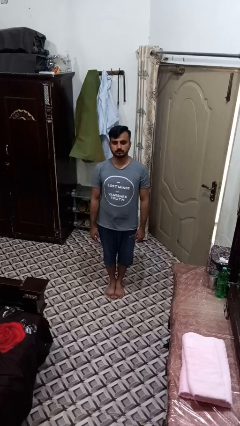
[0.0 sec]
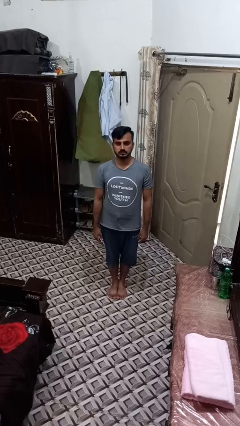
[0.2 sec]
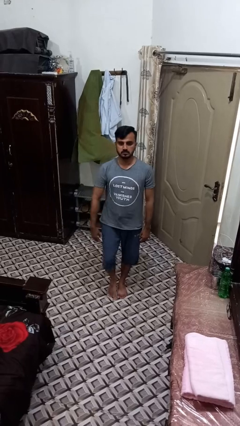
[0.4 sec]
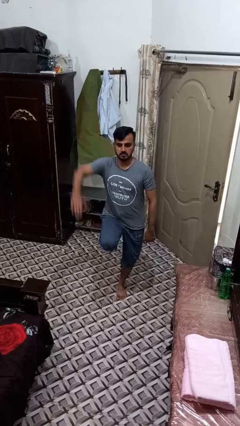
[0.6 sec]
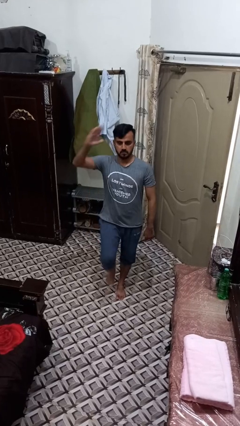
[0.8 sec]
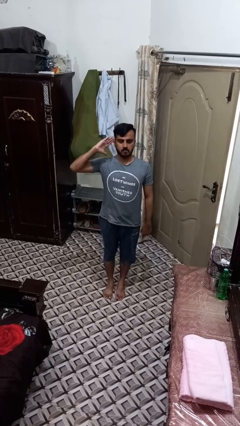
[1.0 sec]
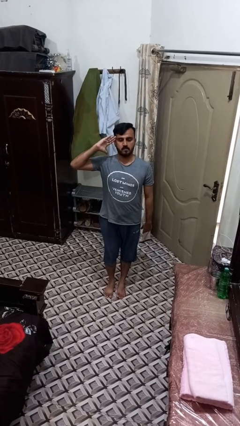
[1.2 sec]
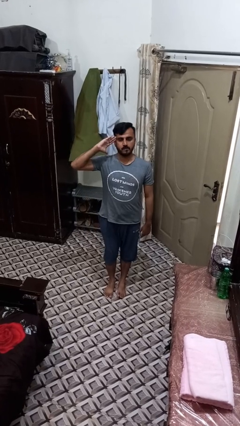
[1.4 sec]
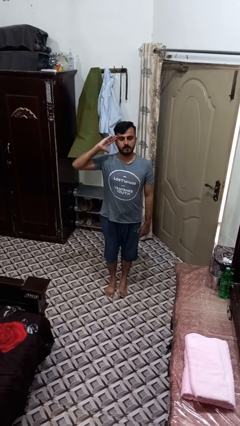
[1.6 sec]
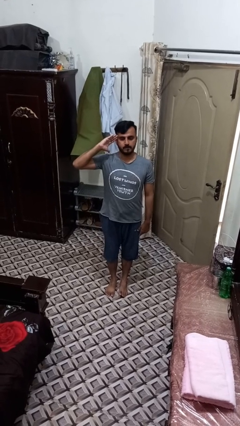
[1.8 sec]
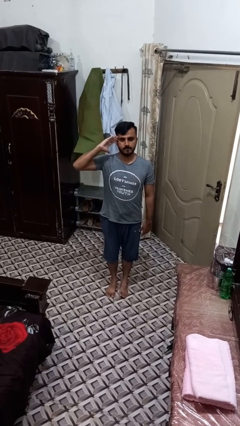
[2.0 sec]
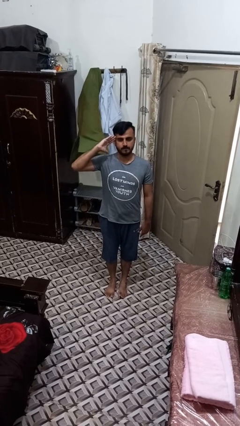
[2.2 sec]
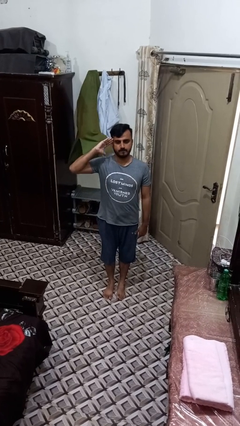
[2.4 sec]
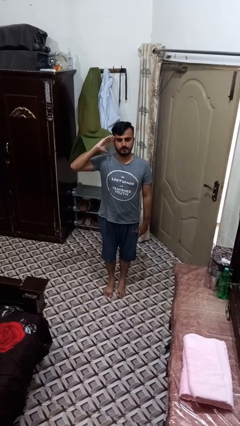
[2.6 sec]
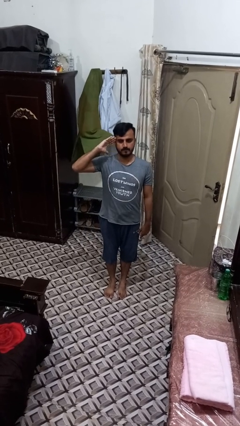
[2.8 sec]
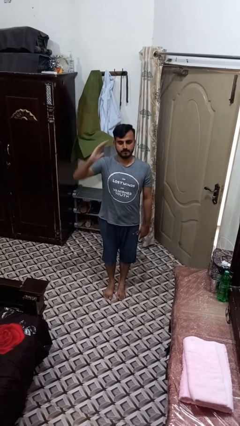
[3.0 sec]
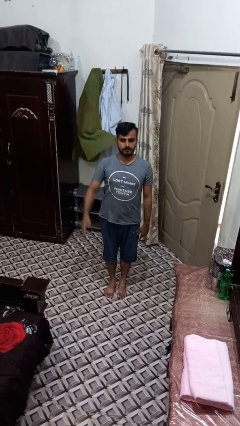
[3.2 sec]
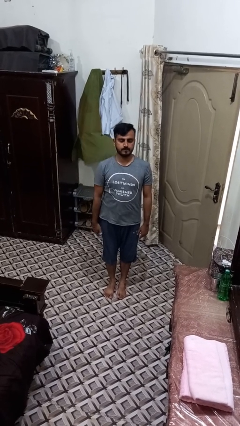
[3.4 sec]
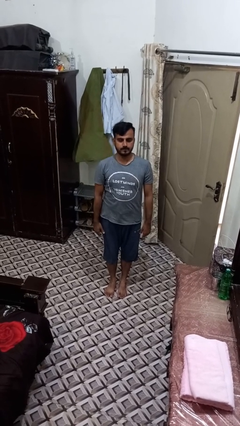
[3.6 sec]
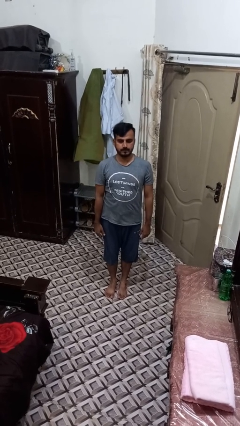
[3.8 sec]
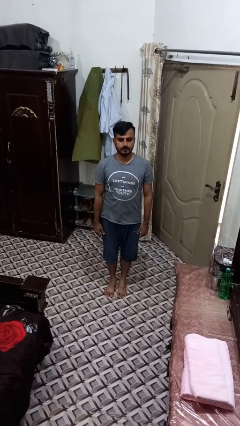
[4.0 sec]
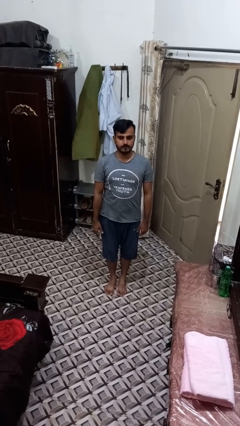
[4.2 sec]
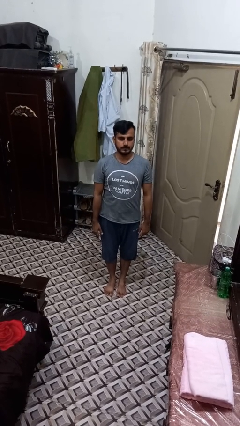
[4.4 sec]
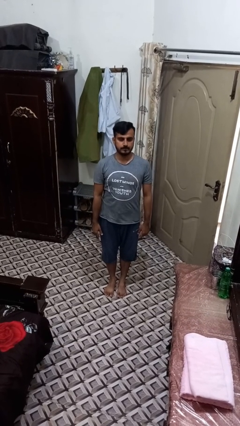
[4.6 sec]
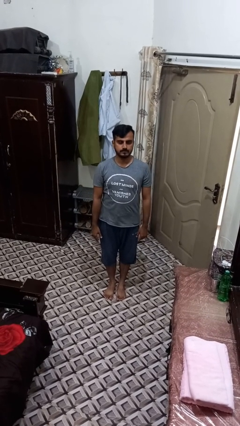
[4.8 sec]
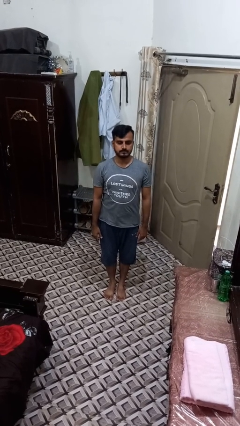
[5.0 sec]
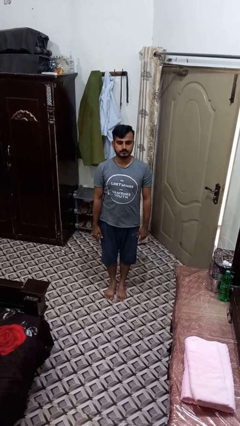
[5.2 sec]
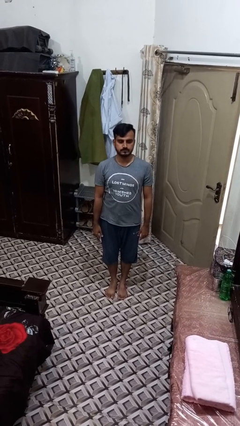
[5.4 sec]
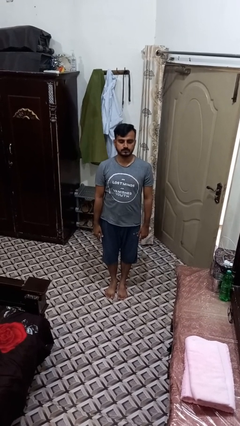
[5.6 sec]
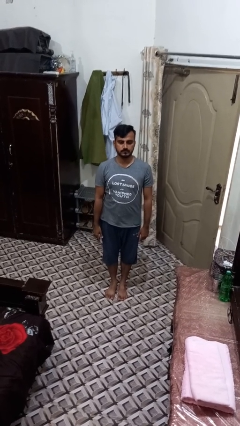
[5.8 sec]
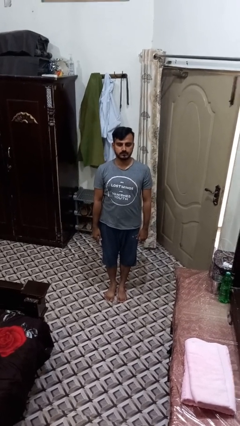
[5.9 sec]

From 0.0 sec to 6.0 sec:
person salutes

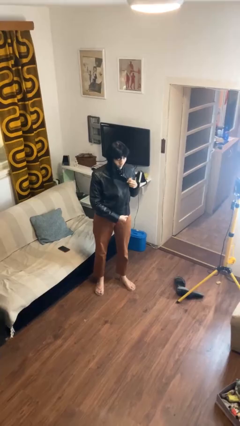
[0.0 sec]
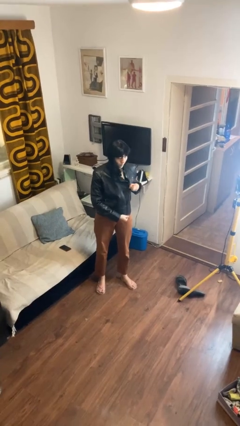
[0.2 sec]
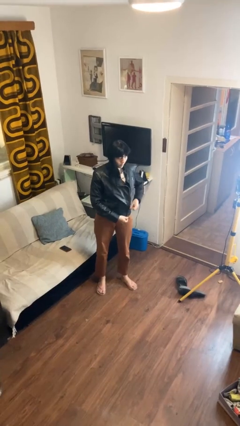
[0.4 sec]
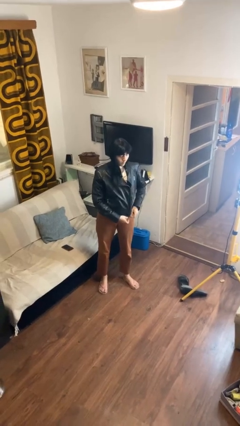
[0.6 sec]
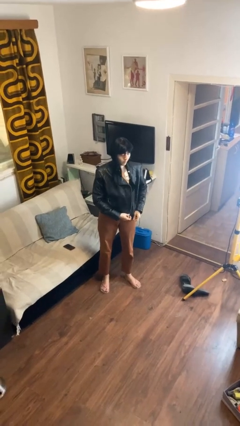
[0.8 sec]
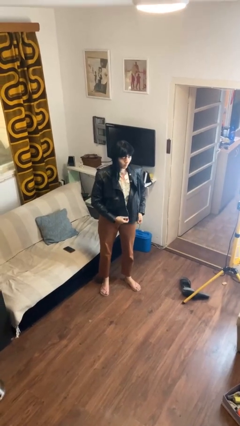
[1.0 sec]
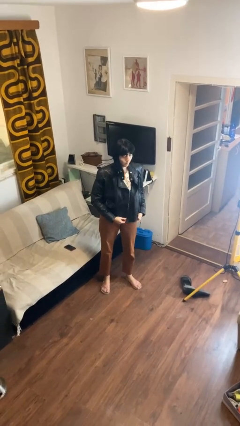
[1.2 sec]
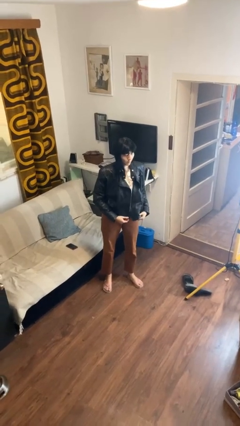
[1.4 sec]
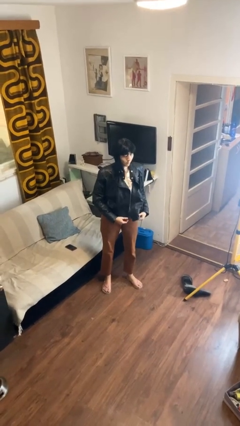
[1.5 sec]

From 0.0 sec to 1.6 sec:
person unzips jacket

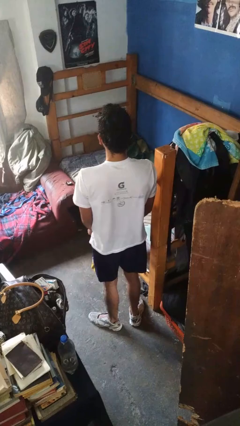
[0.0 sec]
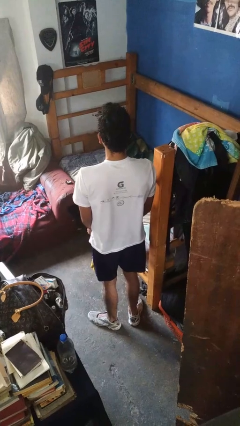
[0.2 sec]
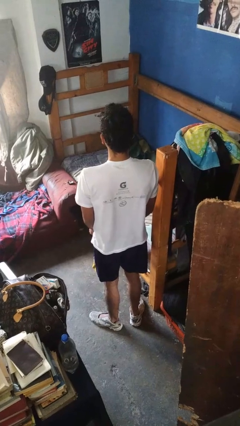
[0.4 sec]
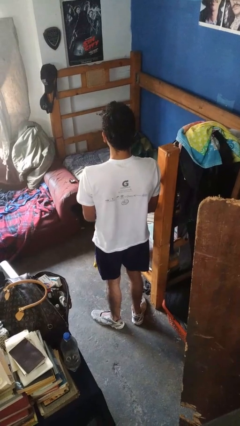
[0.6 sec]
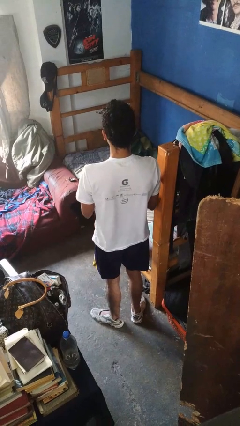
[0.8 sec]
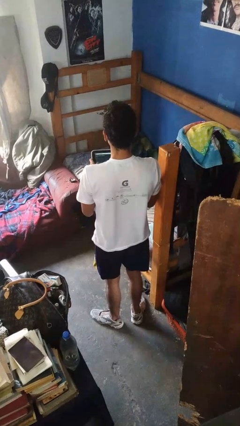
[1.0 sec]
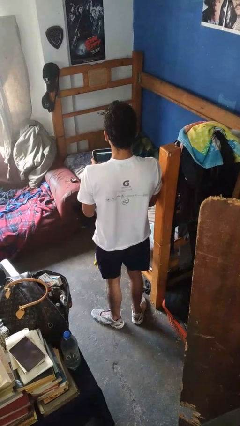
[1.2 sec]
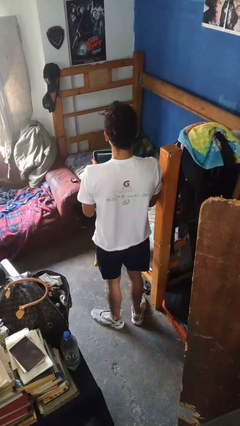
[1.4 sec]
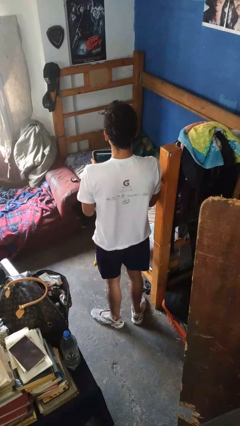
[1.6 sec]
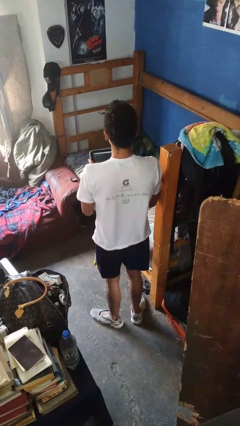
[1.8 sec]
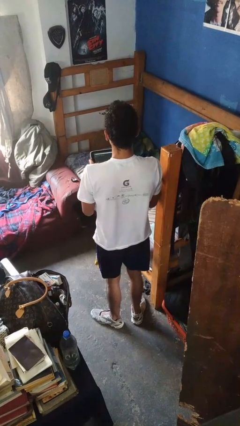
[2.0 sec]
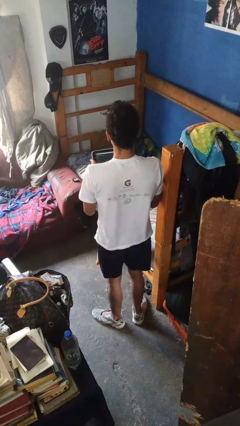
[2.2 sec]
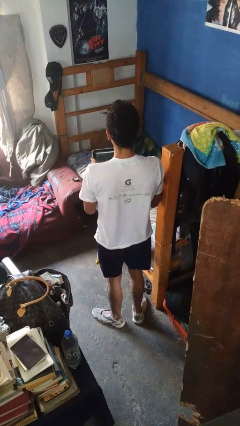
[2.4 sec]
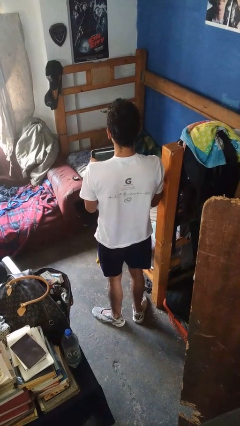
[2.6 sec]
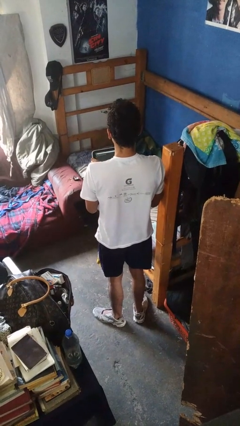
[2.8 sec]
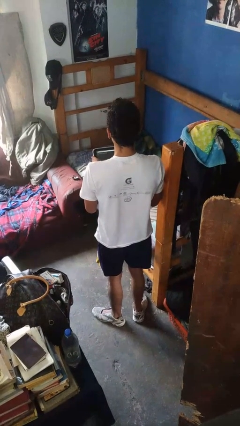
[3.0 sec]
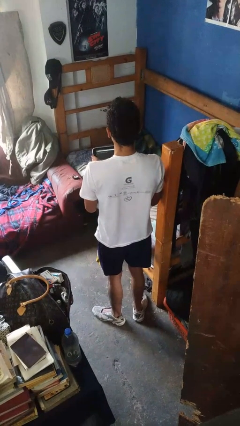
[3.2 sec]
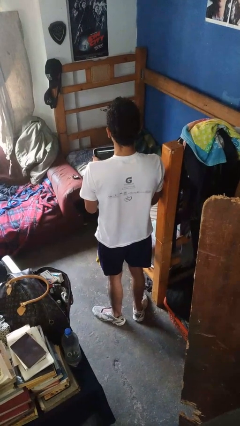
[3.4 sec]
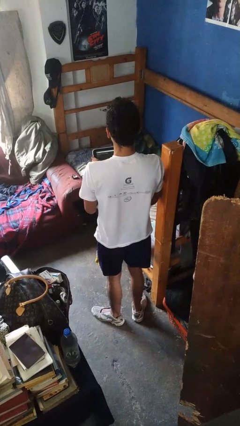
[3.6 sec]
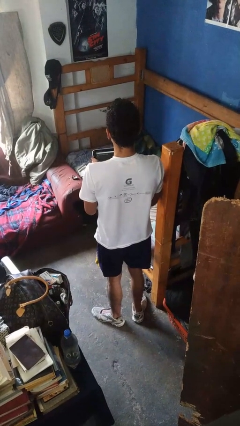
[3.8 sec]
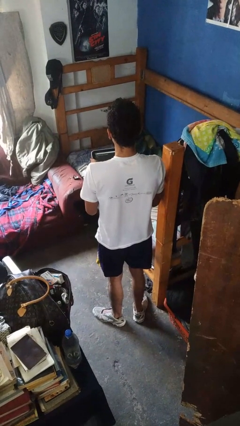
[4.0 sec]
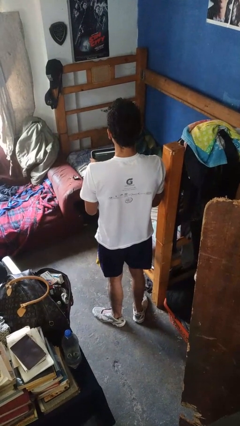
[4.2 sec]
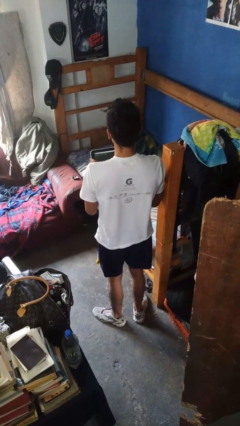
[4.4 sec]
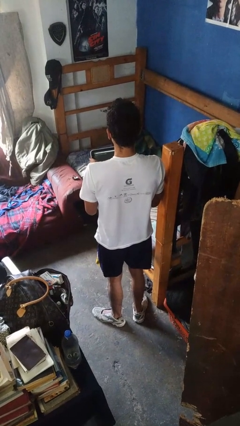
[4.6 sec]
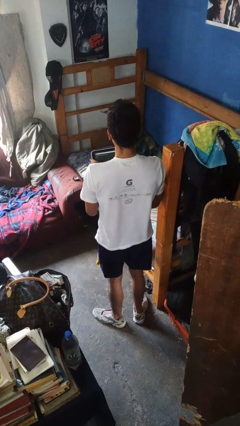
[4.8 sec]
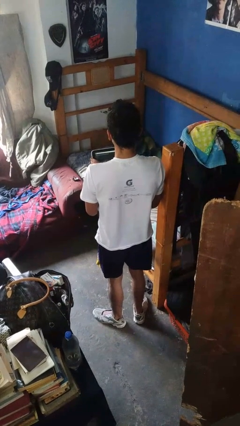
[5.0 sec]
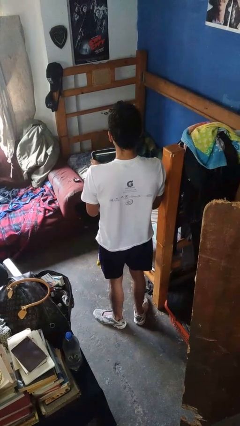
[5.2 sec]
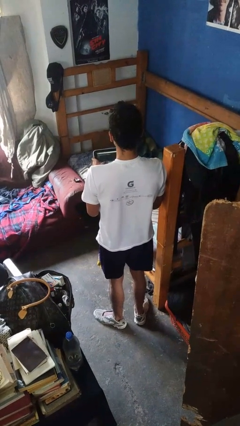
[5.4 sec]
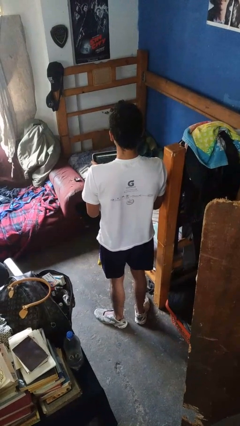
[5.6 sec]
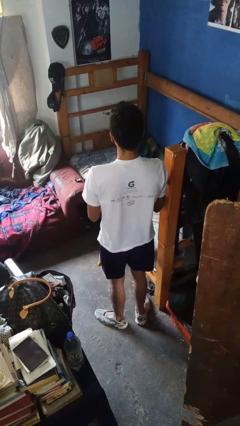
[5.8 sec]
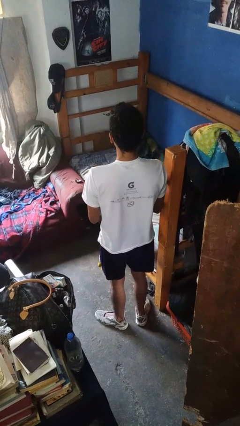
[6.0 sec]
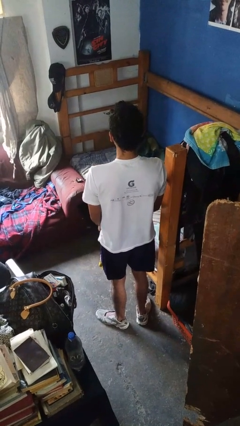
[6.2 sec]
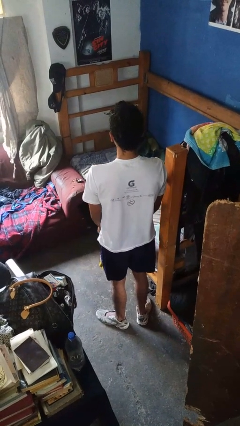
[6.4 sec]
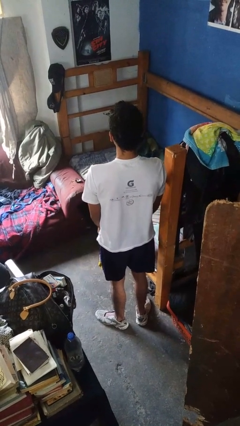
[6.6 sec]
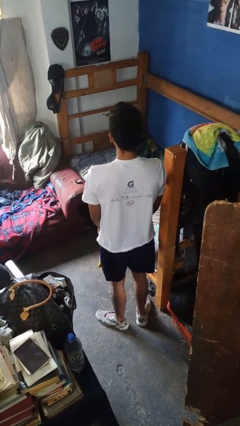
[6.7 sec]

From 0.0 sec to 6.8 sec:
person interacts with tablet

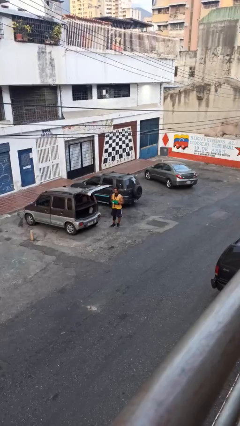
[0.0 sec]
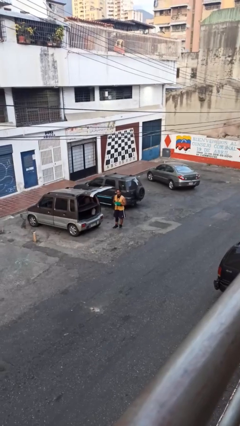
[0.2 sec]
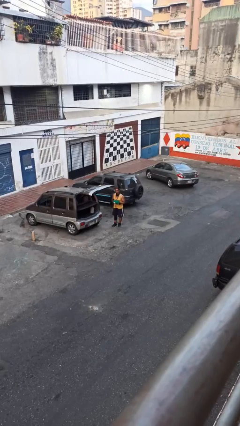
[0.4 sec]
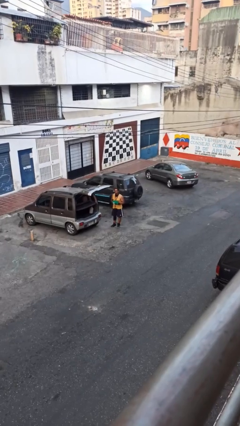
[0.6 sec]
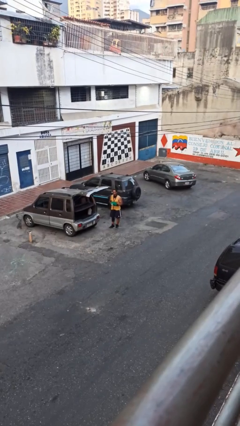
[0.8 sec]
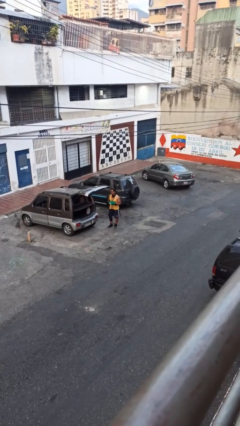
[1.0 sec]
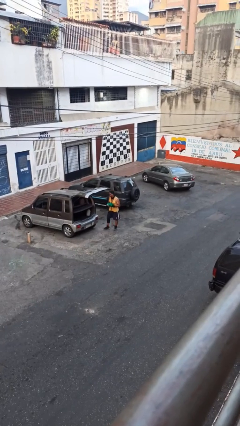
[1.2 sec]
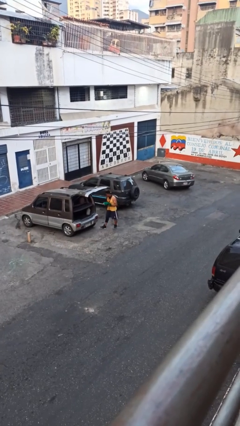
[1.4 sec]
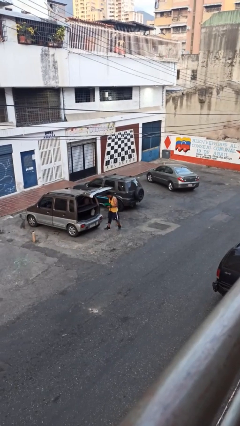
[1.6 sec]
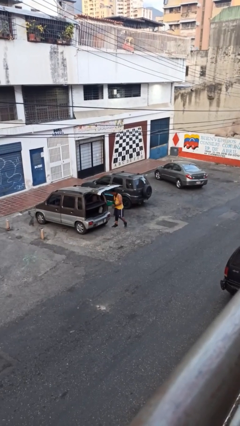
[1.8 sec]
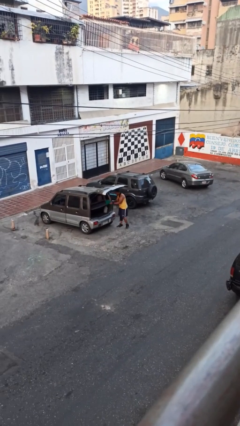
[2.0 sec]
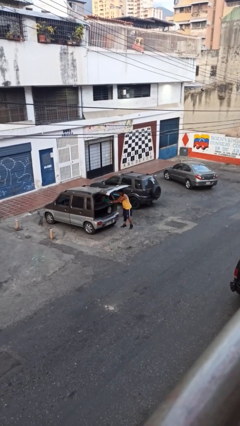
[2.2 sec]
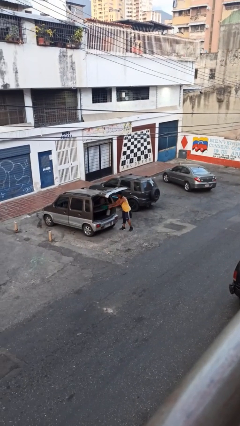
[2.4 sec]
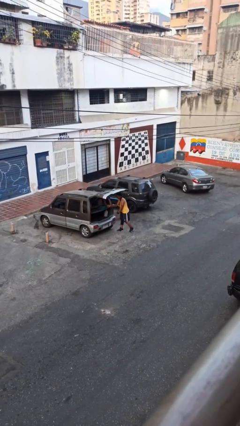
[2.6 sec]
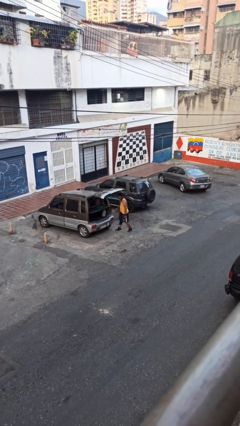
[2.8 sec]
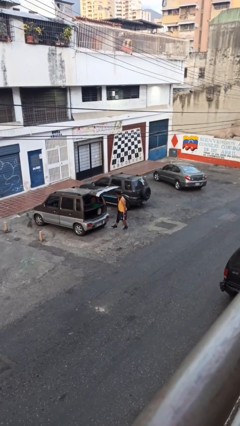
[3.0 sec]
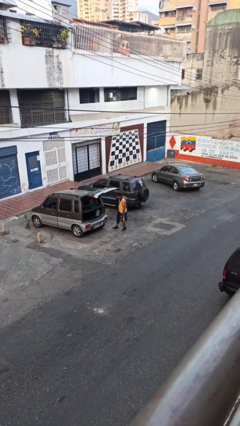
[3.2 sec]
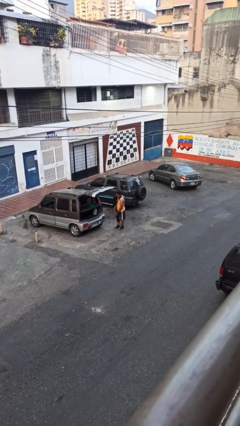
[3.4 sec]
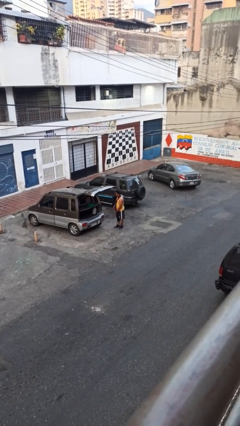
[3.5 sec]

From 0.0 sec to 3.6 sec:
person loads car
